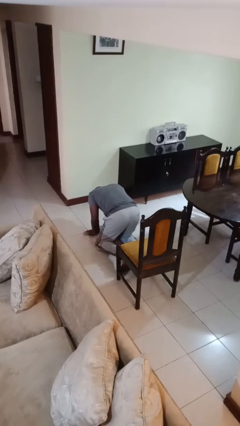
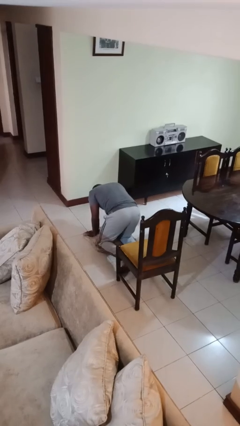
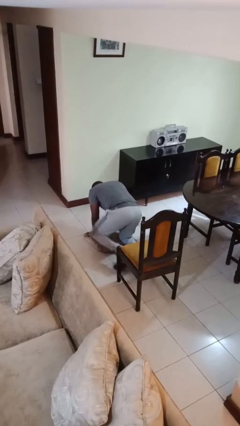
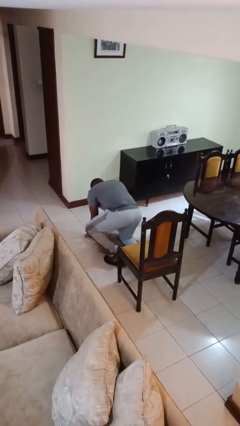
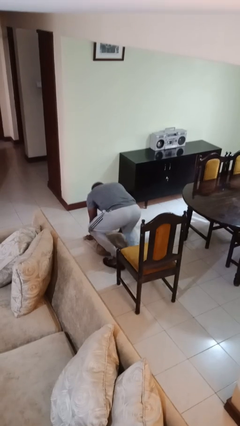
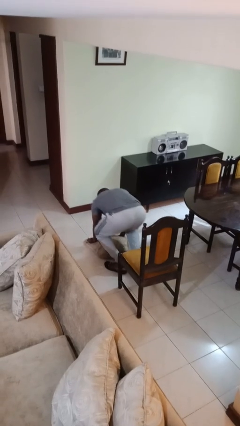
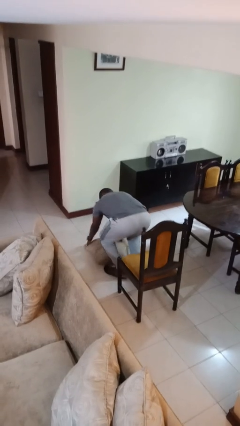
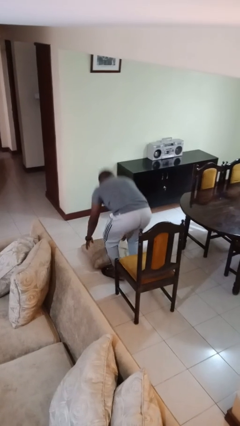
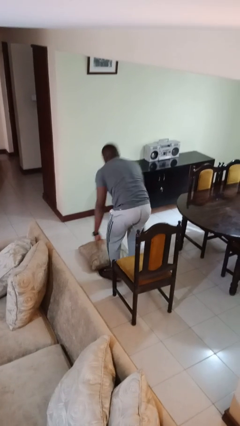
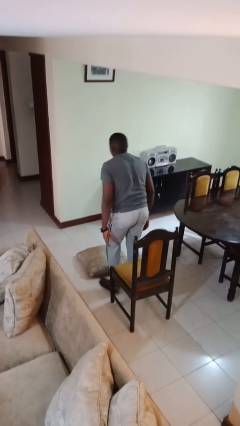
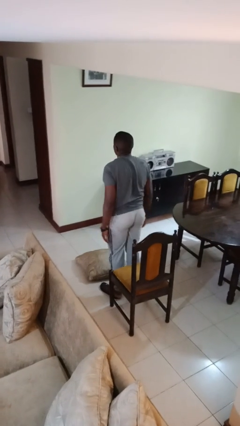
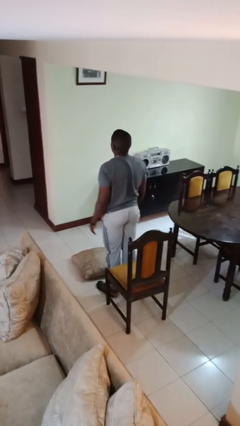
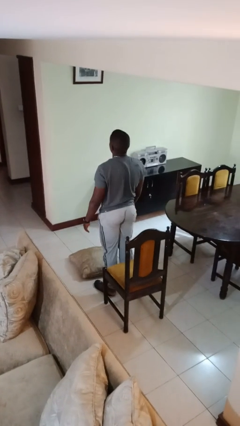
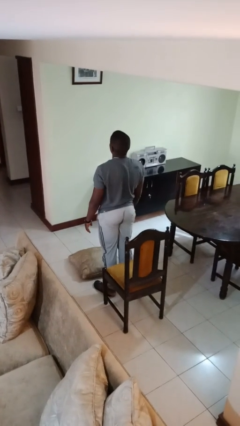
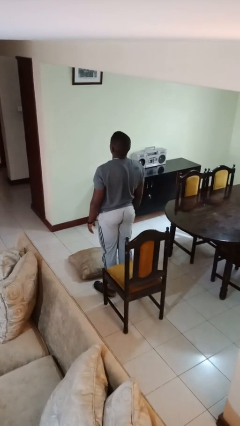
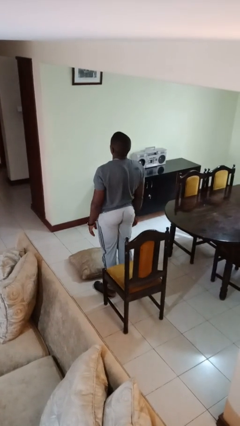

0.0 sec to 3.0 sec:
person stands up from floor

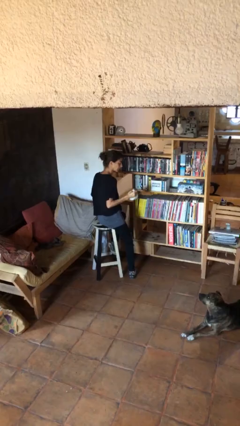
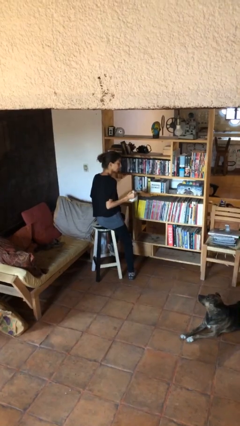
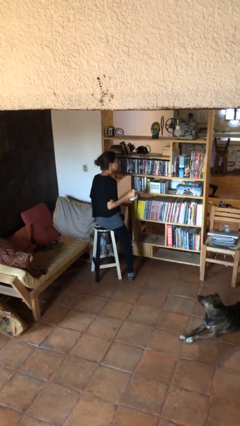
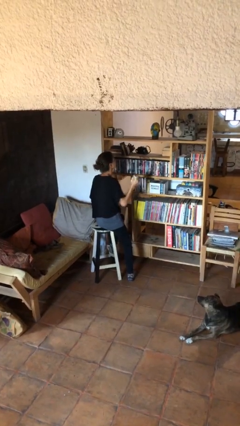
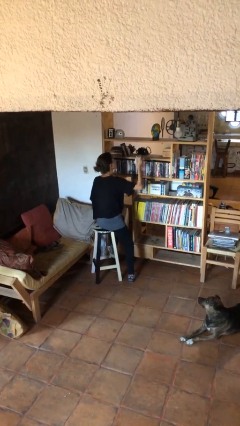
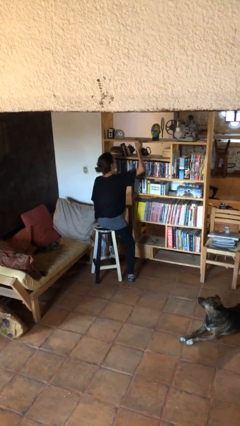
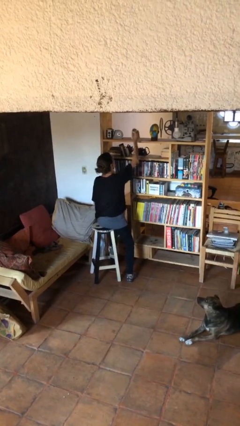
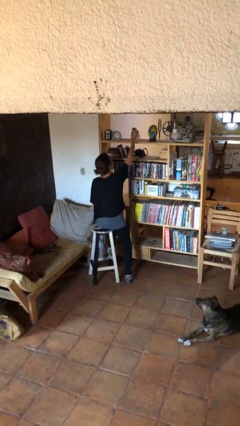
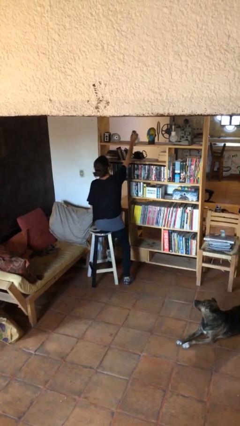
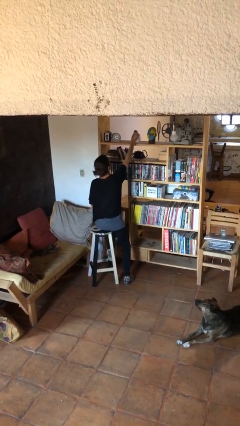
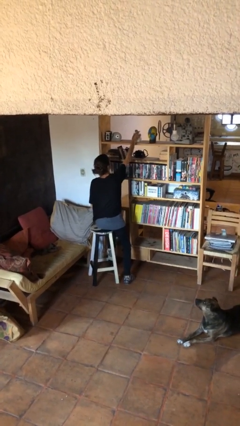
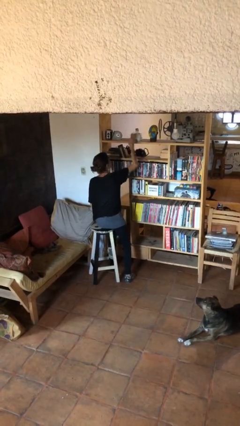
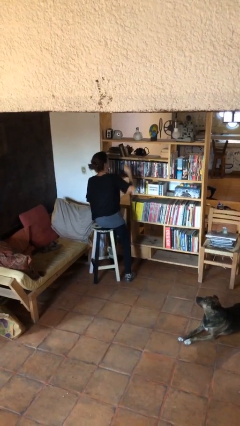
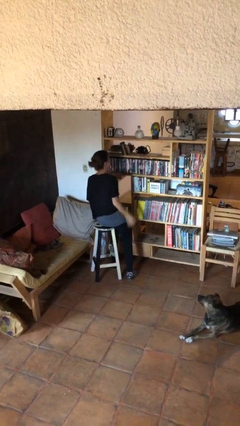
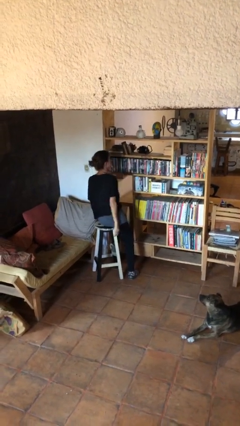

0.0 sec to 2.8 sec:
person puts down object on countertop

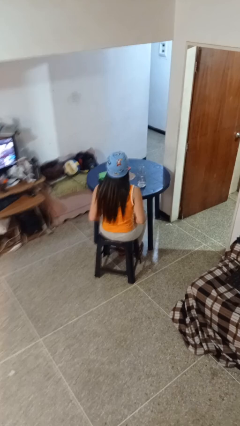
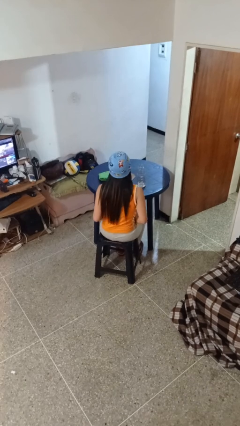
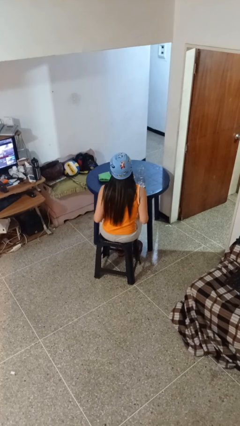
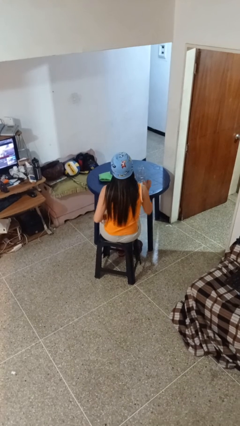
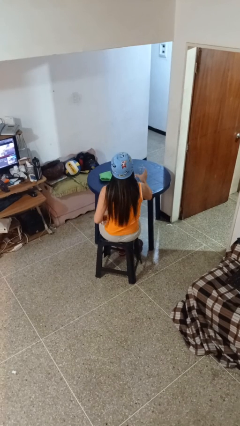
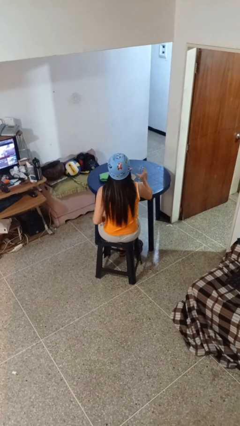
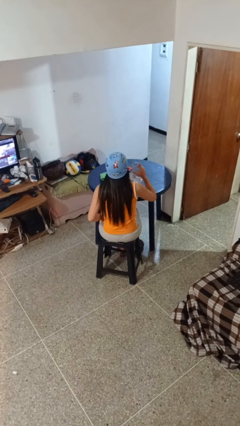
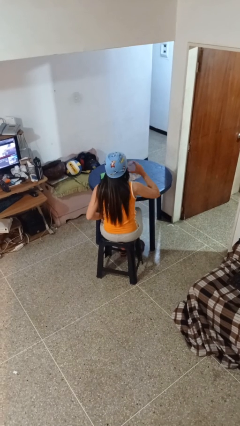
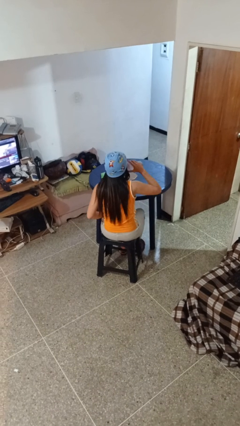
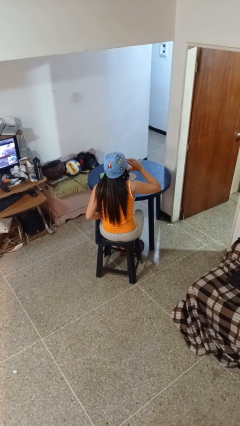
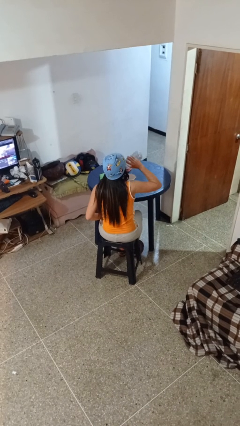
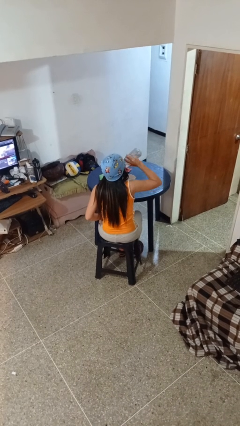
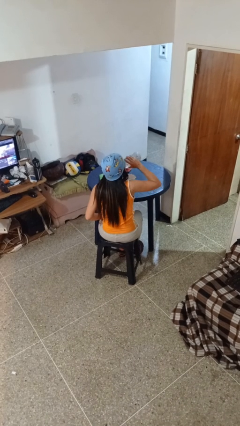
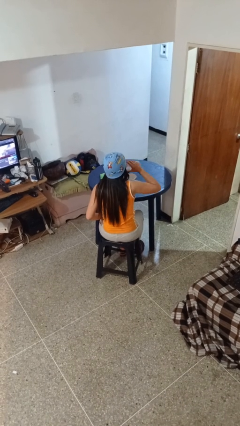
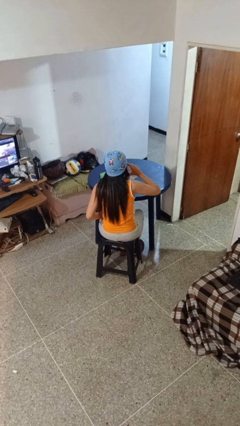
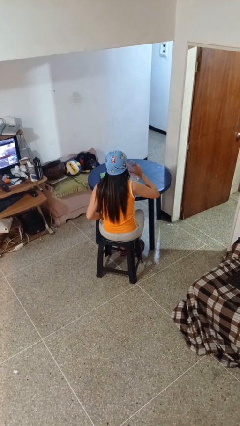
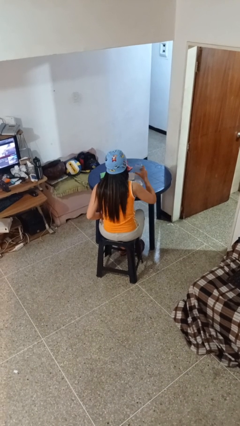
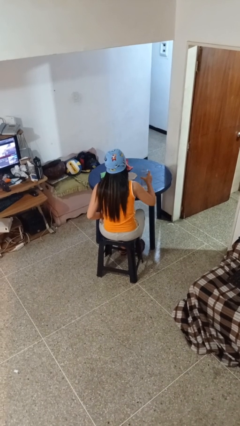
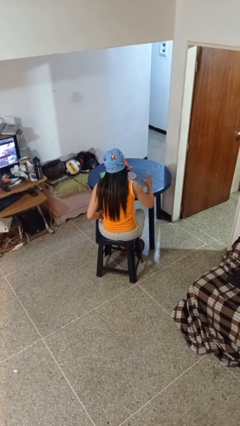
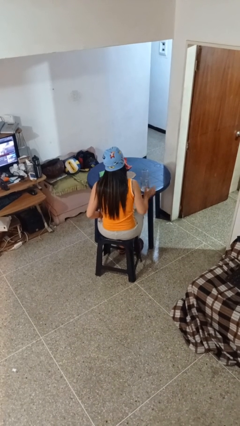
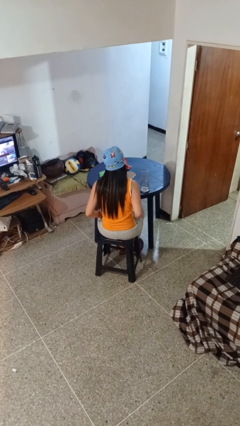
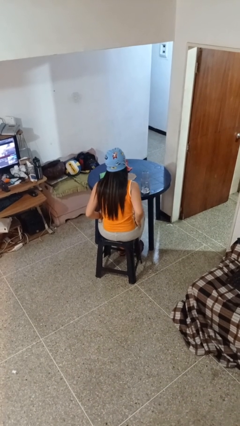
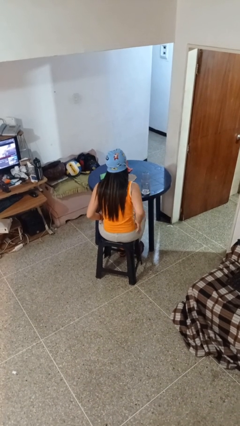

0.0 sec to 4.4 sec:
person drinks from bottle

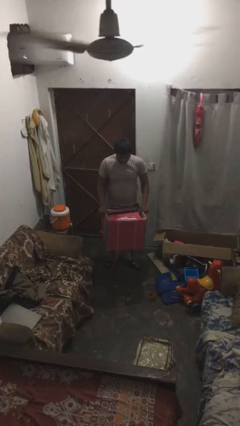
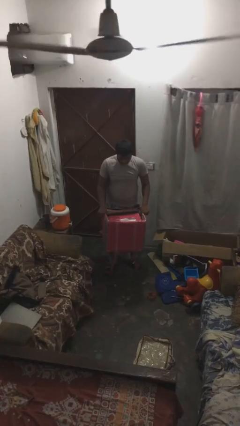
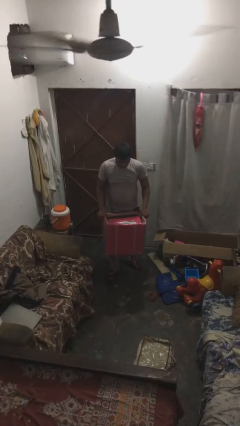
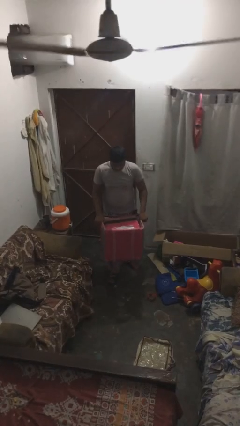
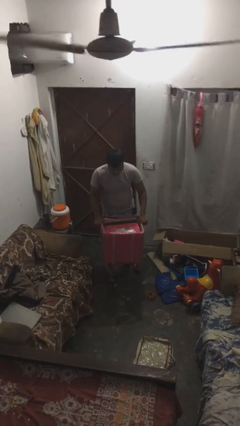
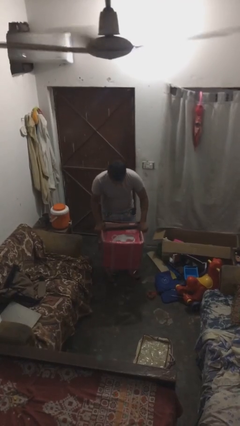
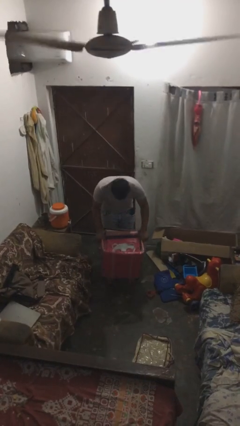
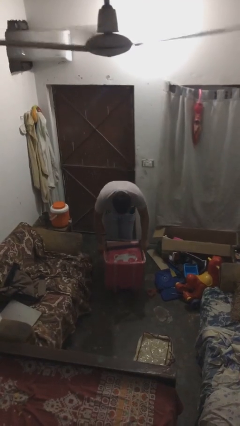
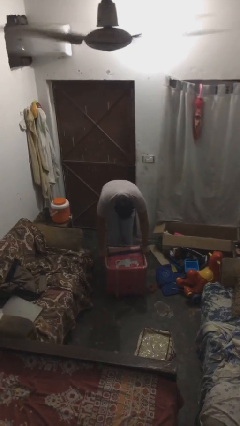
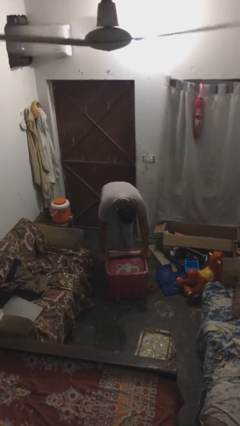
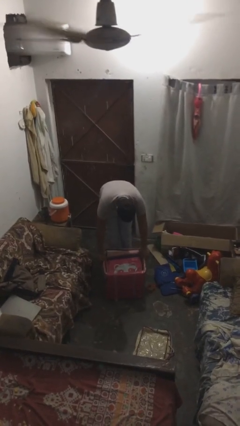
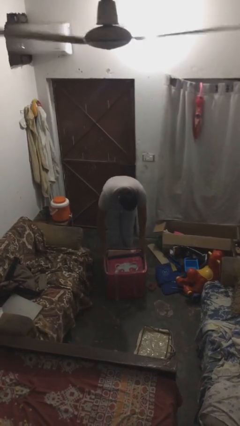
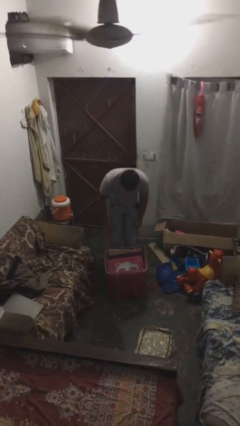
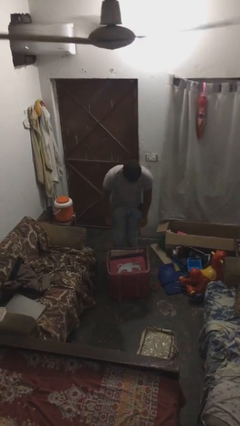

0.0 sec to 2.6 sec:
person puts down object on floor

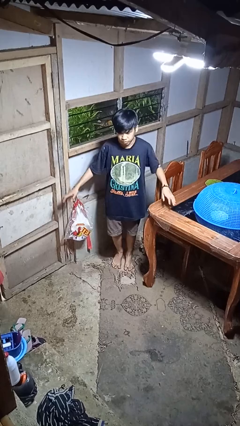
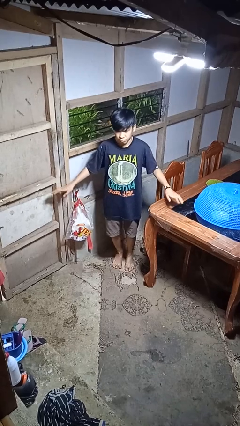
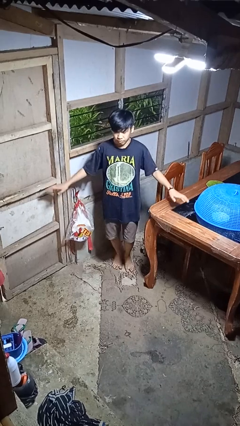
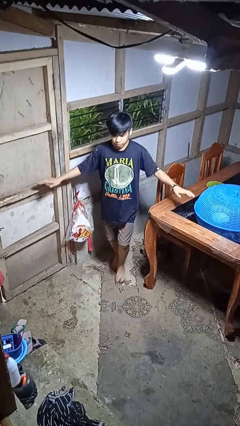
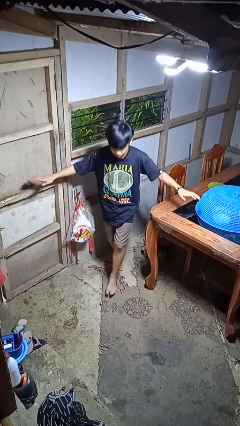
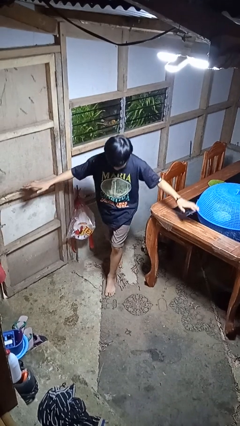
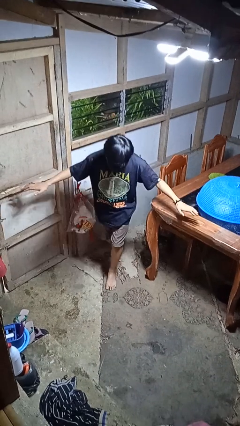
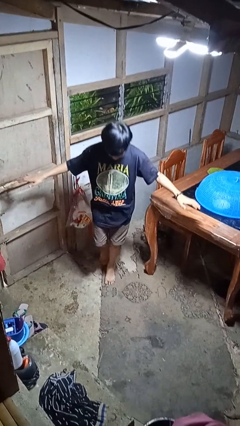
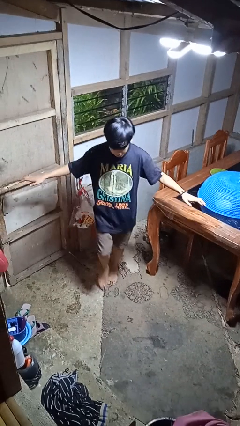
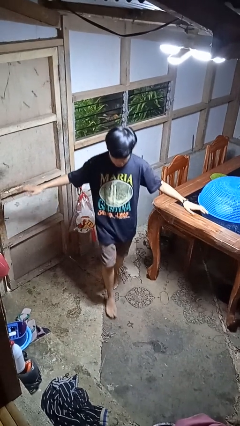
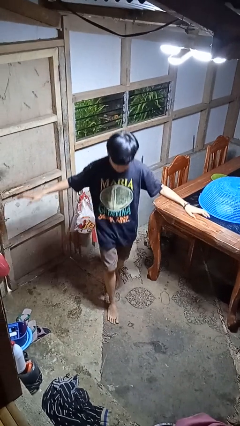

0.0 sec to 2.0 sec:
person walks tiptoe

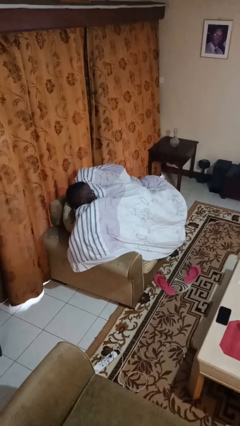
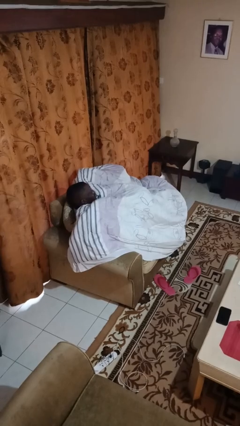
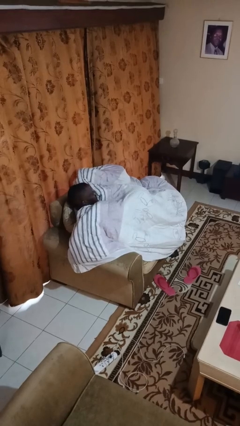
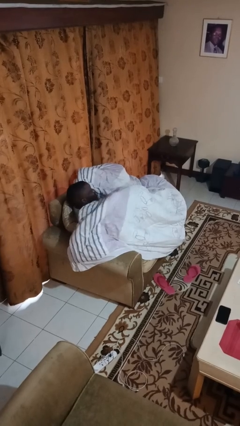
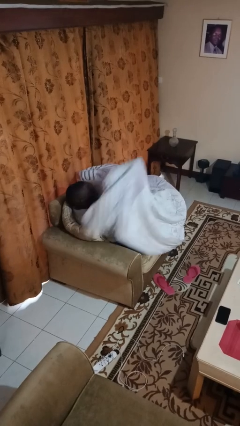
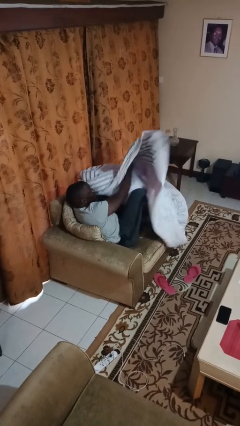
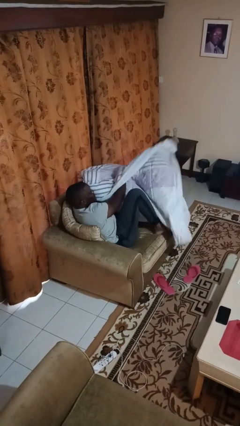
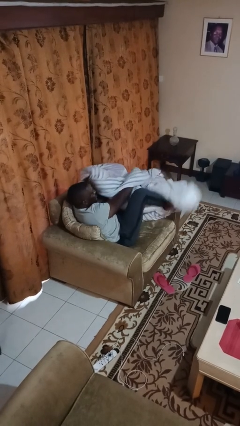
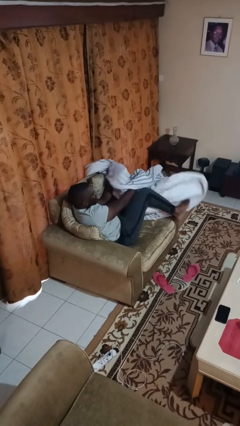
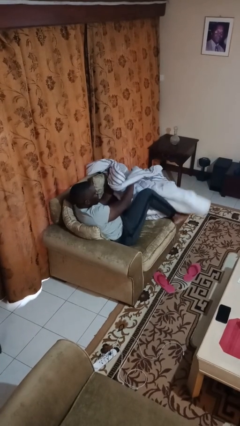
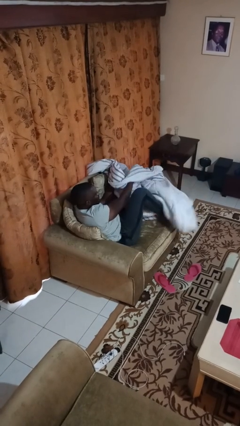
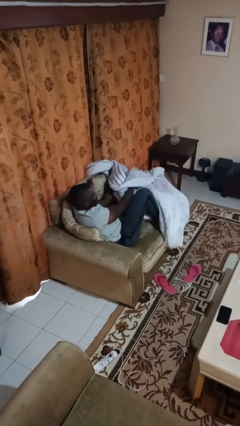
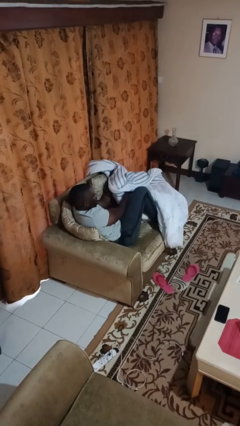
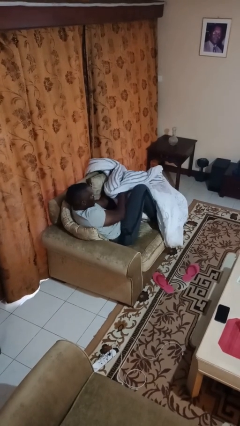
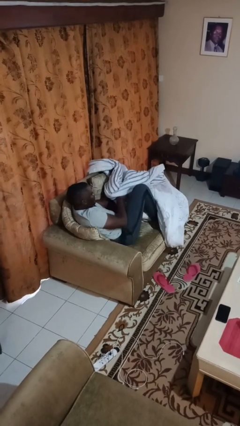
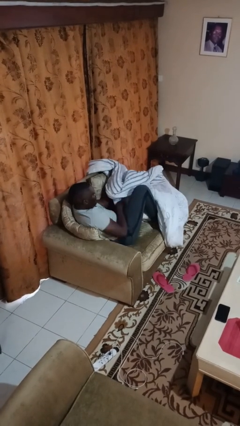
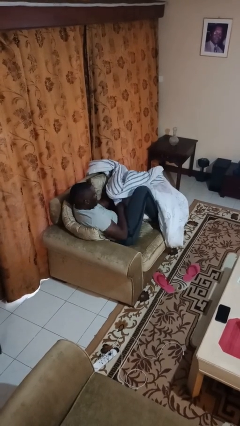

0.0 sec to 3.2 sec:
person uncovers with blanket
